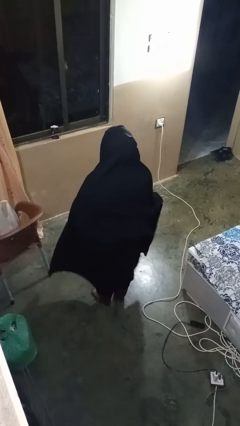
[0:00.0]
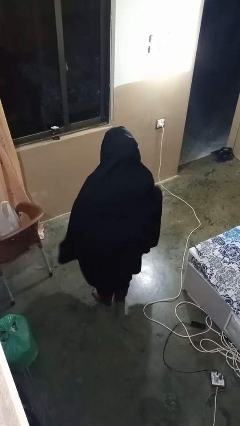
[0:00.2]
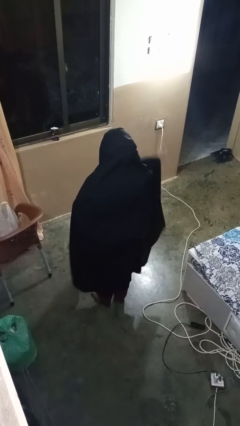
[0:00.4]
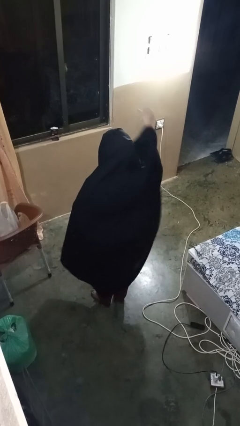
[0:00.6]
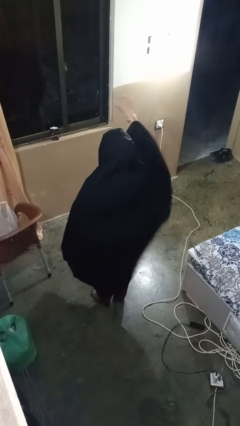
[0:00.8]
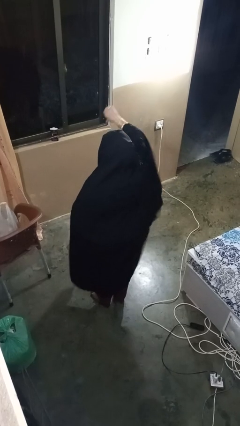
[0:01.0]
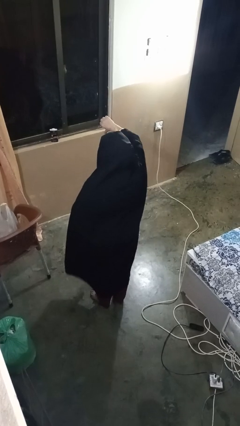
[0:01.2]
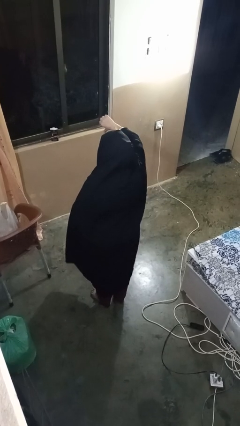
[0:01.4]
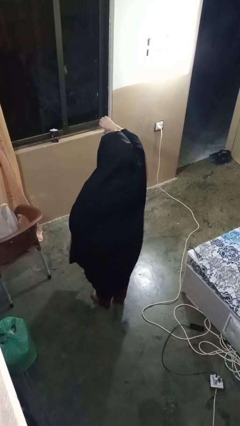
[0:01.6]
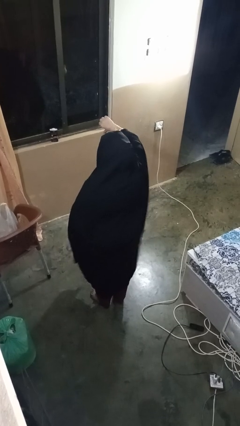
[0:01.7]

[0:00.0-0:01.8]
person gestures thumbs down

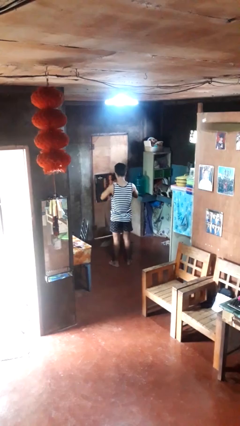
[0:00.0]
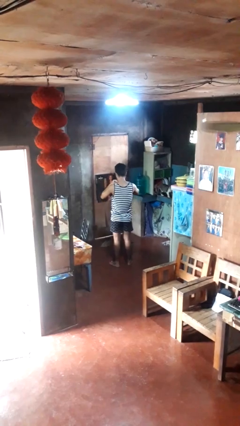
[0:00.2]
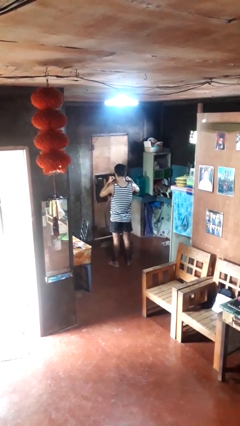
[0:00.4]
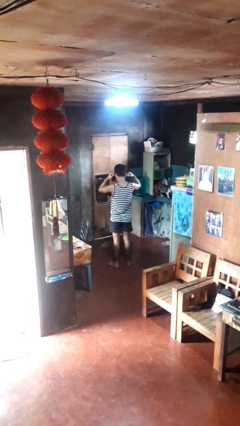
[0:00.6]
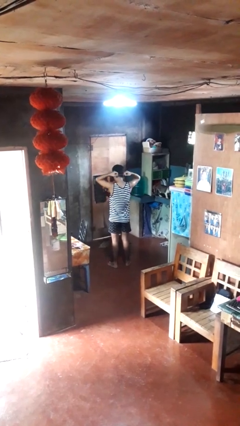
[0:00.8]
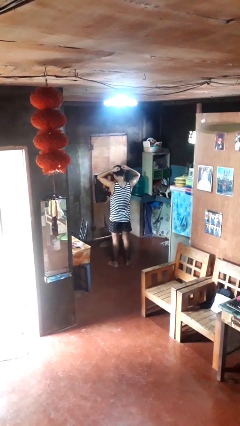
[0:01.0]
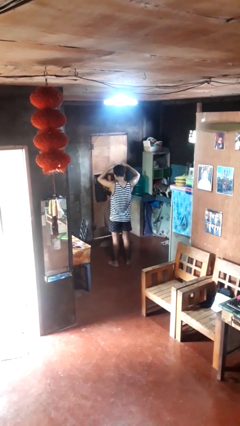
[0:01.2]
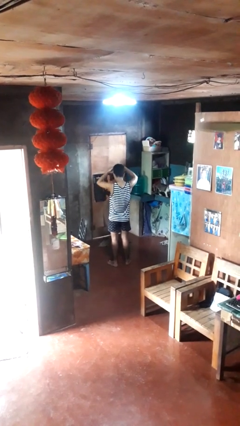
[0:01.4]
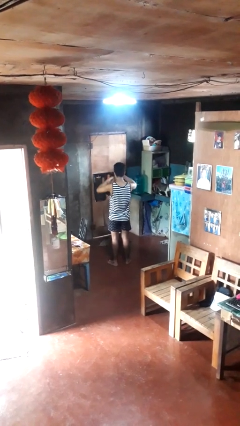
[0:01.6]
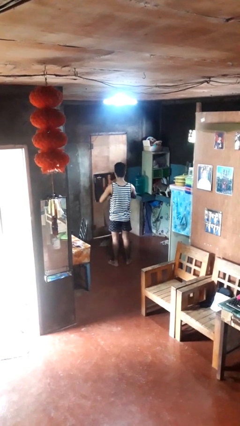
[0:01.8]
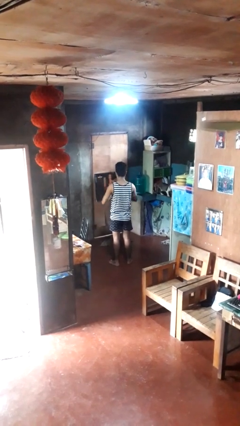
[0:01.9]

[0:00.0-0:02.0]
person takes off necklace

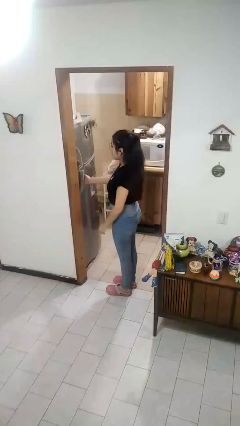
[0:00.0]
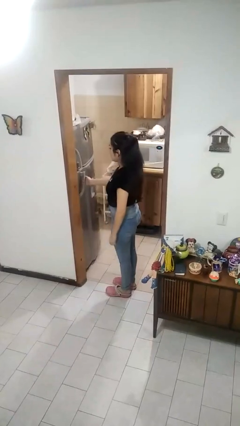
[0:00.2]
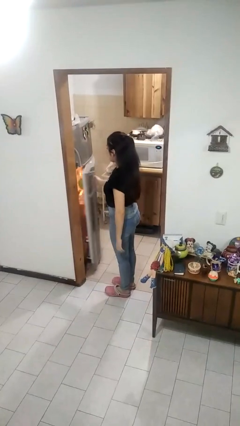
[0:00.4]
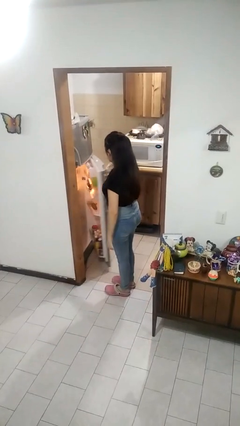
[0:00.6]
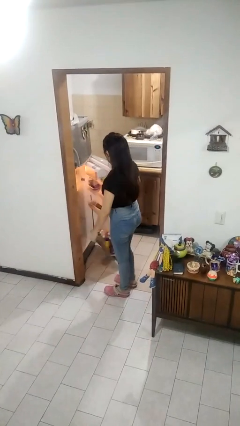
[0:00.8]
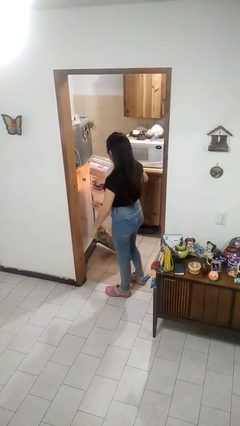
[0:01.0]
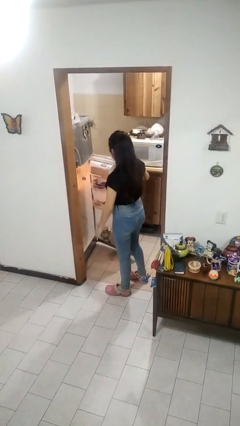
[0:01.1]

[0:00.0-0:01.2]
person opens refrigerator

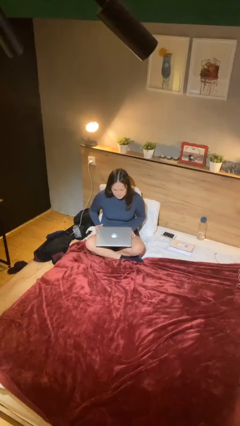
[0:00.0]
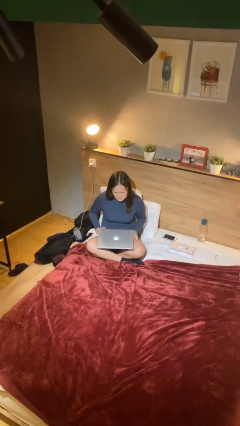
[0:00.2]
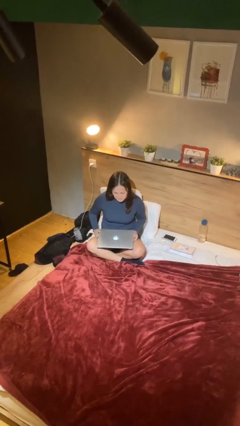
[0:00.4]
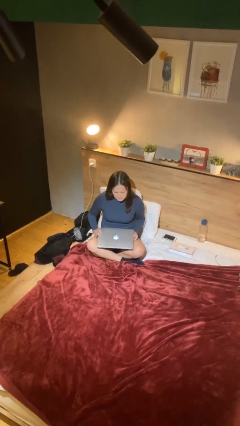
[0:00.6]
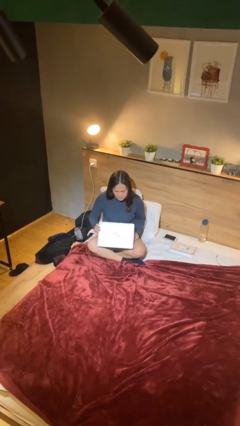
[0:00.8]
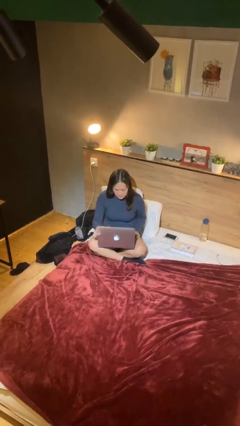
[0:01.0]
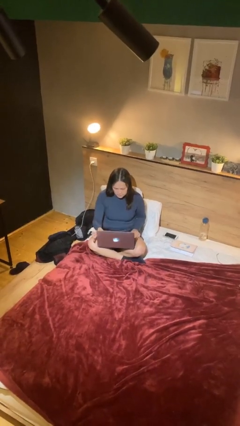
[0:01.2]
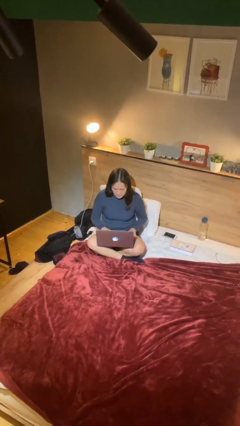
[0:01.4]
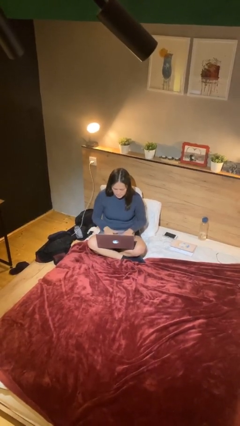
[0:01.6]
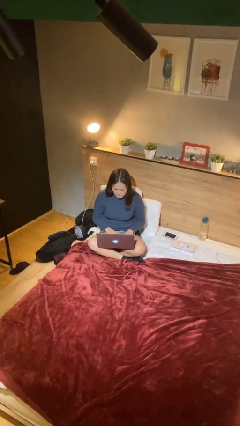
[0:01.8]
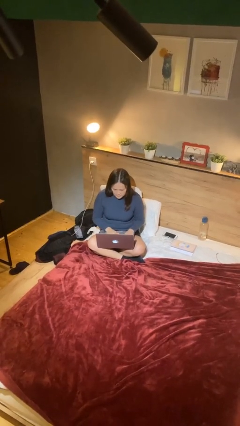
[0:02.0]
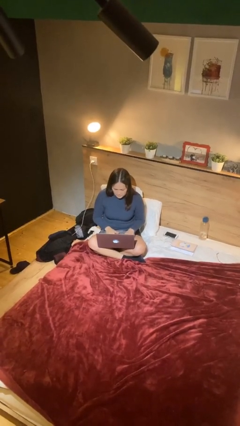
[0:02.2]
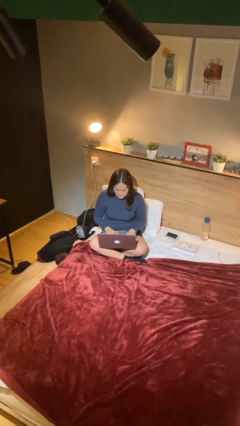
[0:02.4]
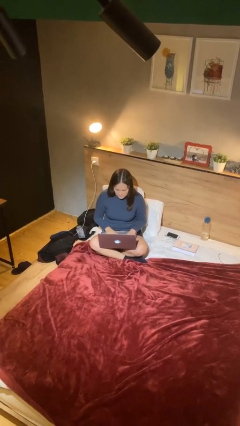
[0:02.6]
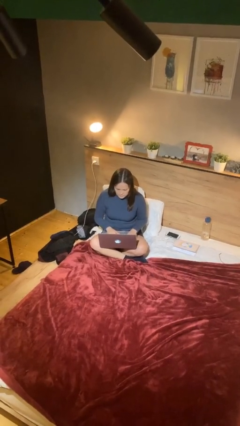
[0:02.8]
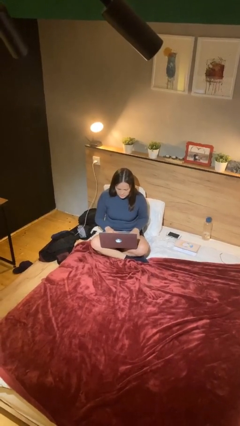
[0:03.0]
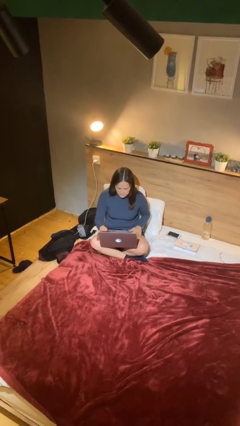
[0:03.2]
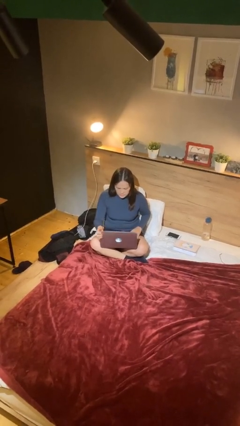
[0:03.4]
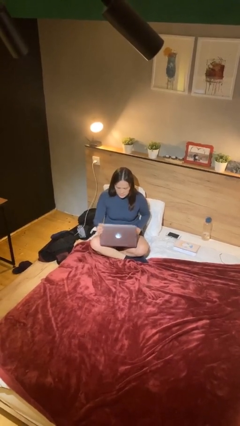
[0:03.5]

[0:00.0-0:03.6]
person interacts with laptop

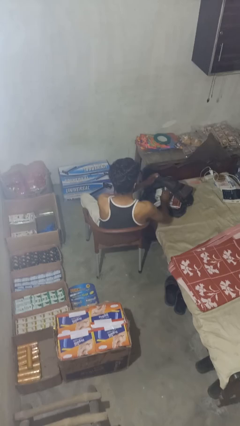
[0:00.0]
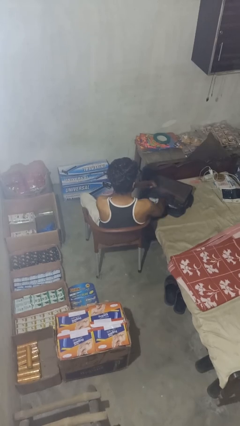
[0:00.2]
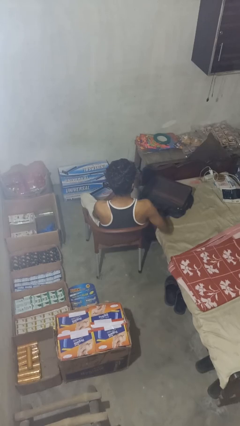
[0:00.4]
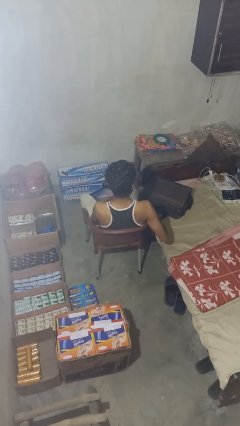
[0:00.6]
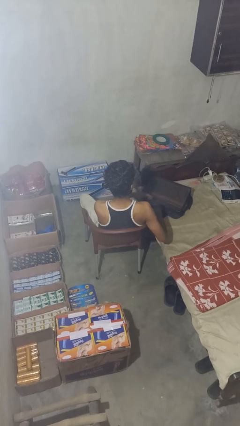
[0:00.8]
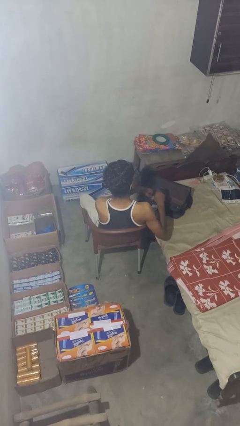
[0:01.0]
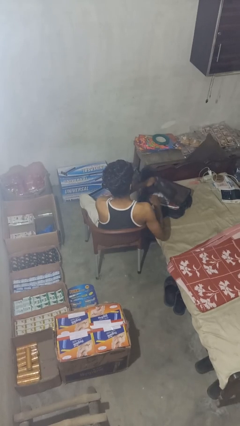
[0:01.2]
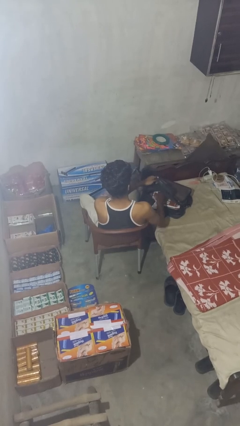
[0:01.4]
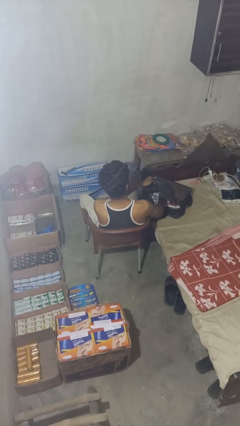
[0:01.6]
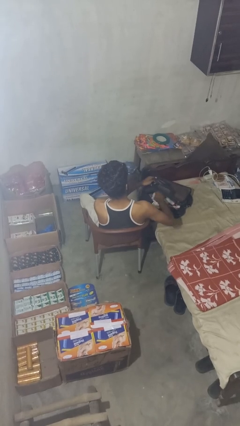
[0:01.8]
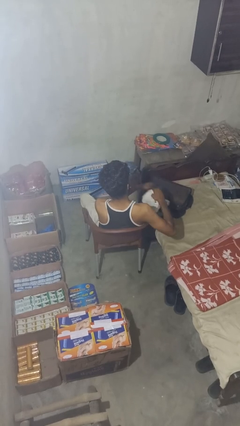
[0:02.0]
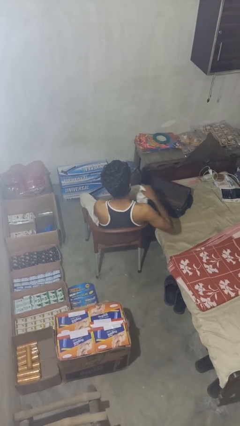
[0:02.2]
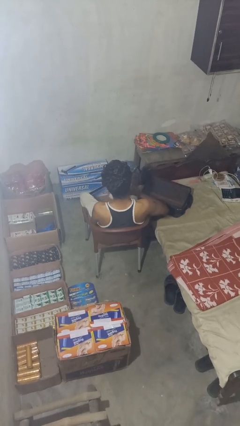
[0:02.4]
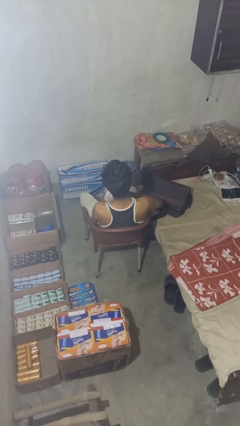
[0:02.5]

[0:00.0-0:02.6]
person unloads clothes from suitcase

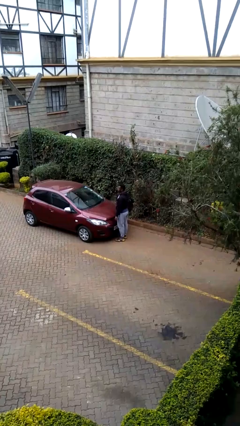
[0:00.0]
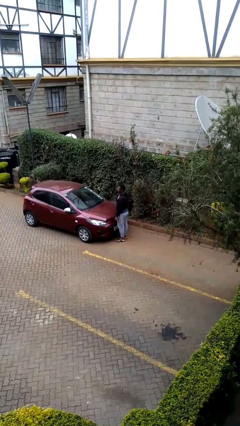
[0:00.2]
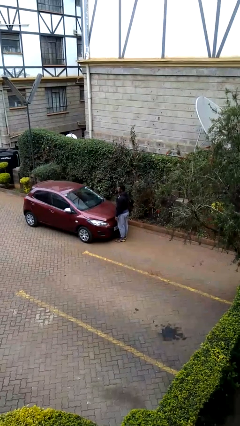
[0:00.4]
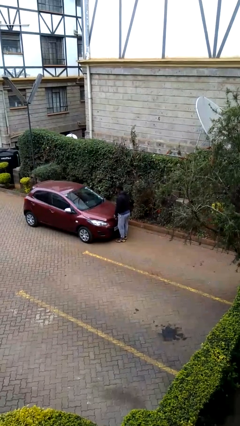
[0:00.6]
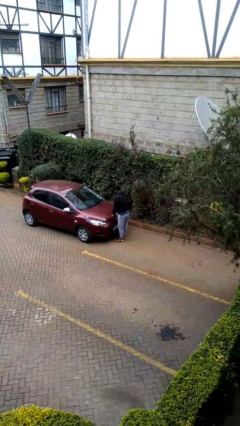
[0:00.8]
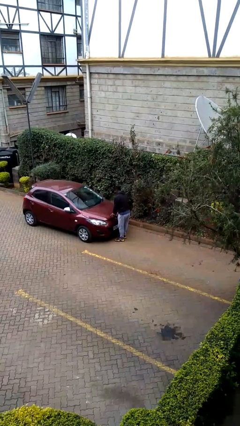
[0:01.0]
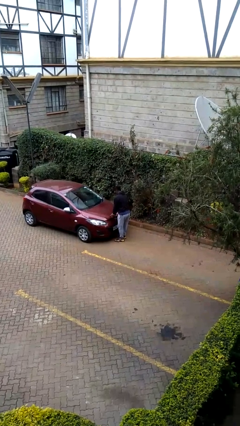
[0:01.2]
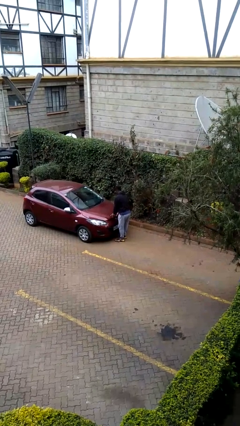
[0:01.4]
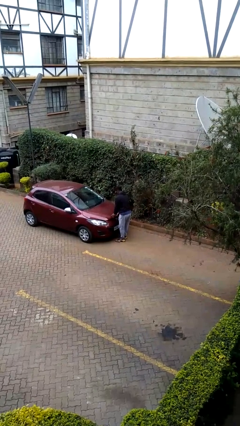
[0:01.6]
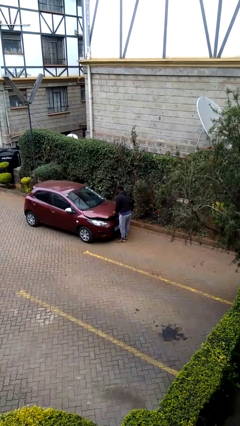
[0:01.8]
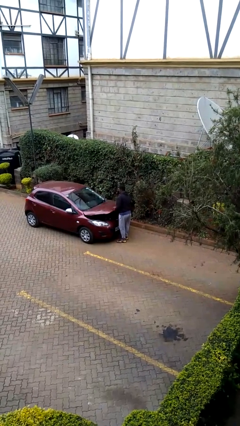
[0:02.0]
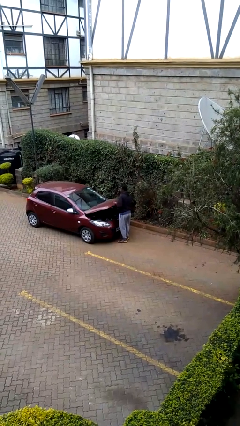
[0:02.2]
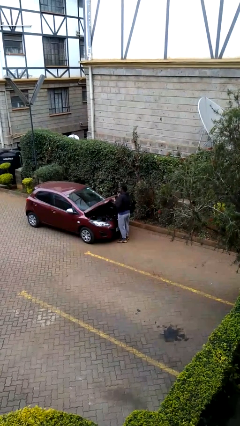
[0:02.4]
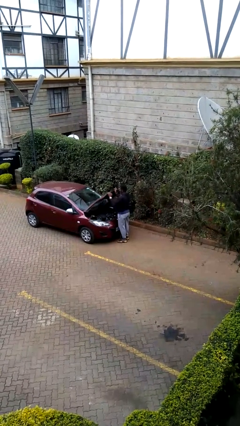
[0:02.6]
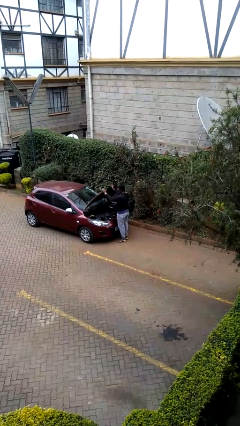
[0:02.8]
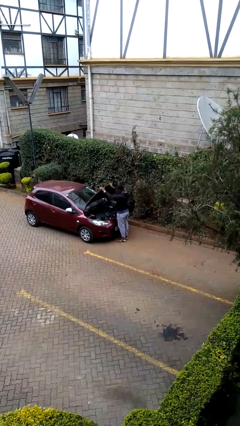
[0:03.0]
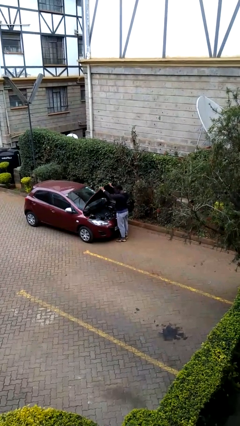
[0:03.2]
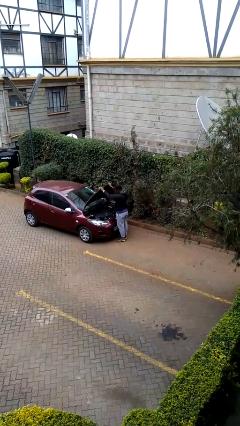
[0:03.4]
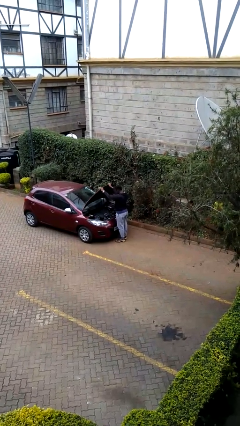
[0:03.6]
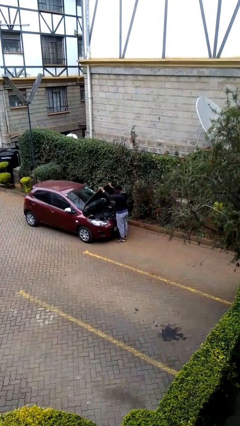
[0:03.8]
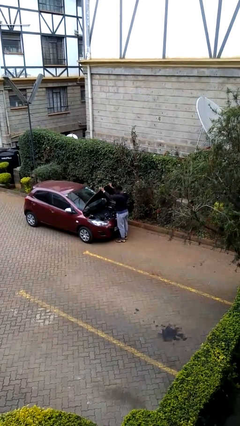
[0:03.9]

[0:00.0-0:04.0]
person opens car hood

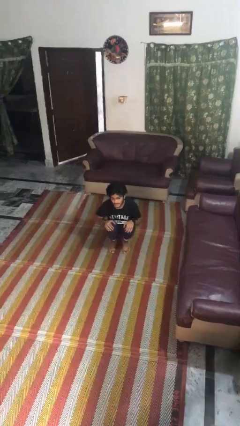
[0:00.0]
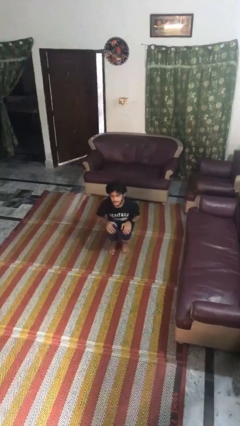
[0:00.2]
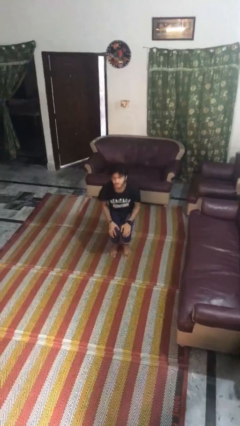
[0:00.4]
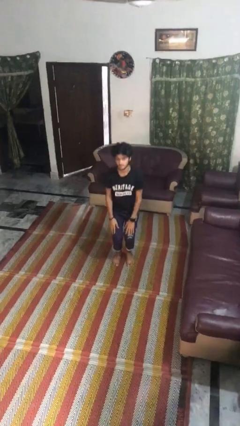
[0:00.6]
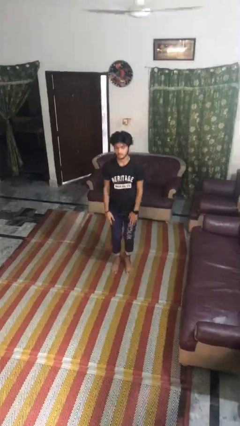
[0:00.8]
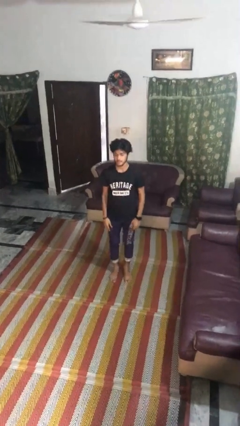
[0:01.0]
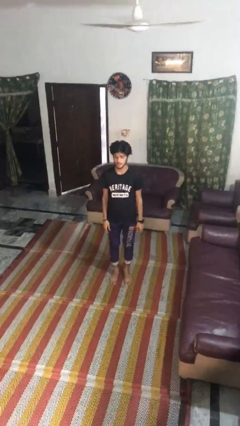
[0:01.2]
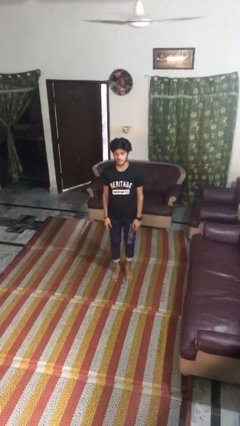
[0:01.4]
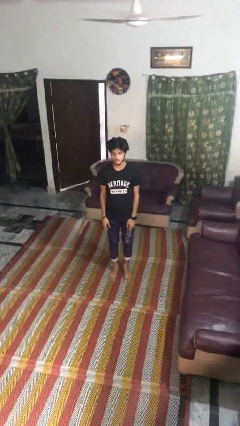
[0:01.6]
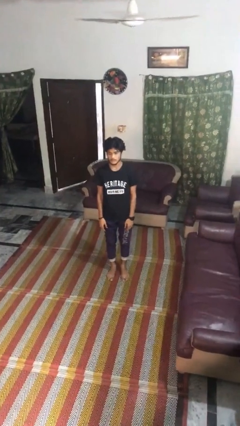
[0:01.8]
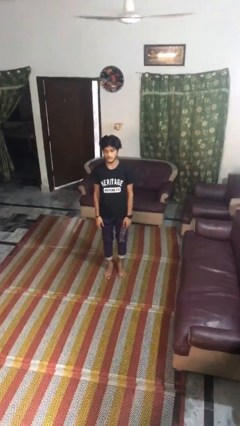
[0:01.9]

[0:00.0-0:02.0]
person stands up
